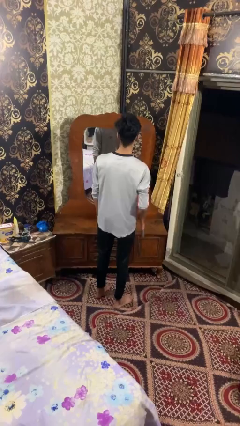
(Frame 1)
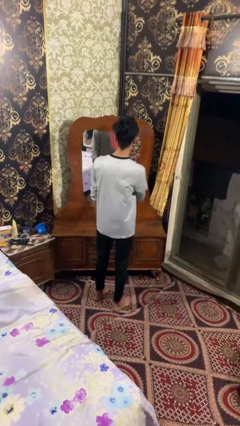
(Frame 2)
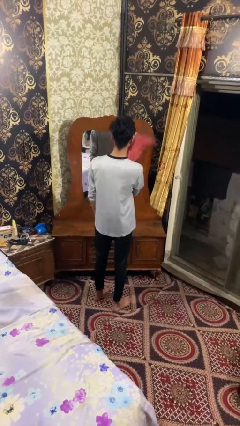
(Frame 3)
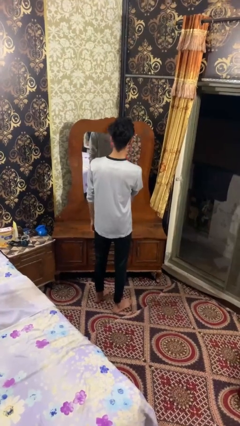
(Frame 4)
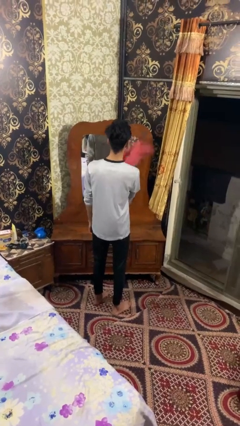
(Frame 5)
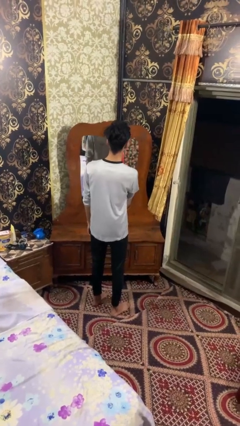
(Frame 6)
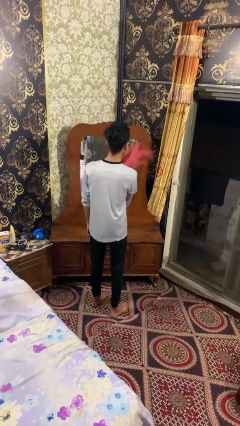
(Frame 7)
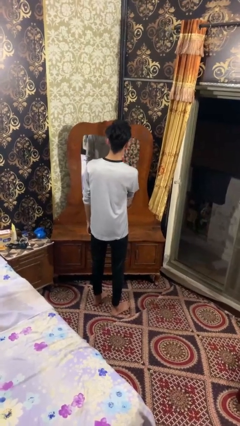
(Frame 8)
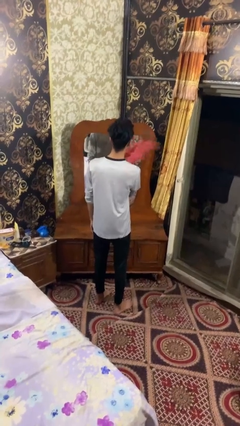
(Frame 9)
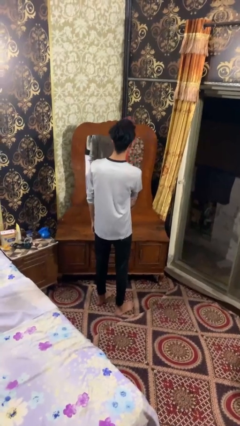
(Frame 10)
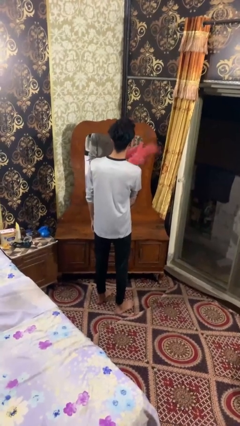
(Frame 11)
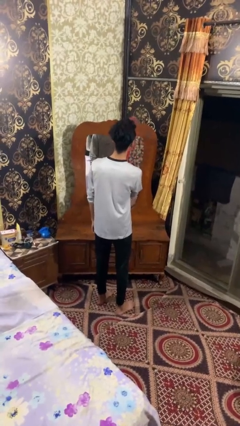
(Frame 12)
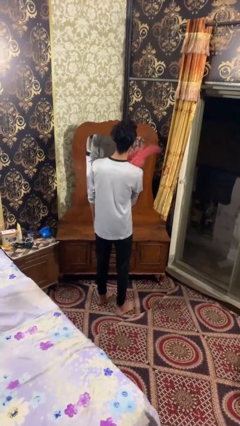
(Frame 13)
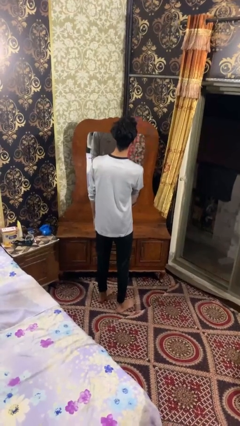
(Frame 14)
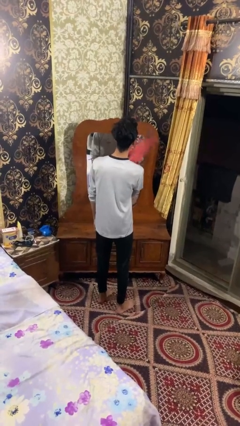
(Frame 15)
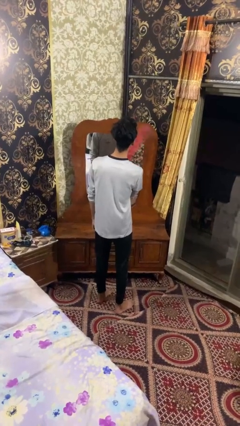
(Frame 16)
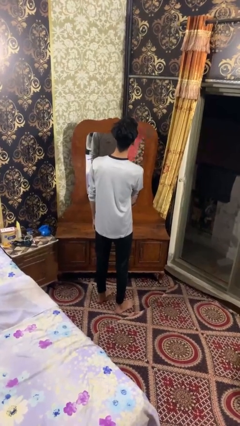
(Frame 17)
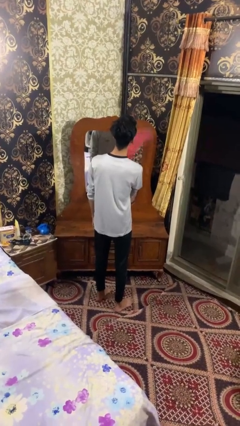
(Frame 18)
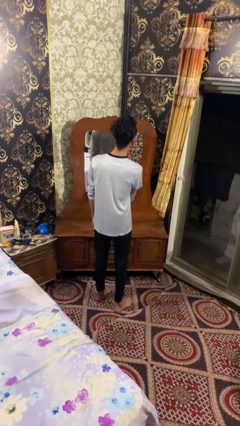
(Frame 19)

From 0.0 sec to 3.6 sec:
person dusts furniture

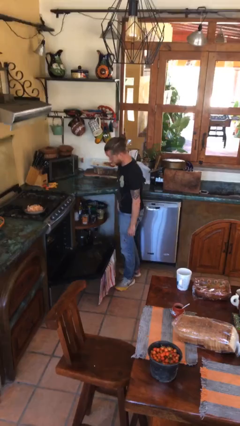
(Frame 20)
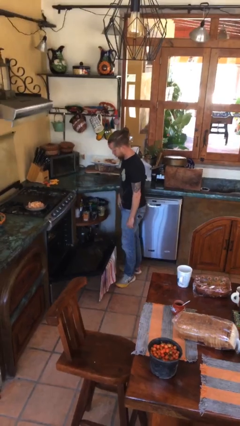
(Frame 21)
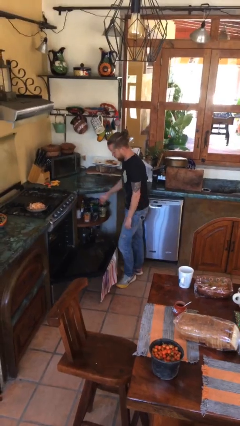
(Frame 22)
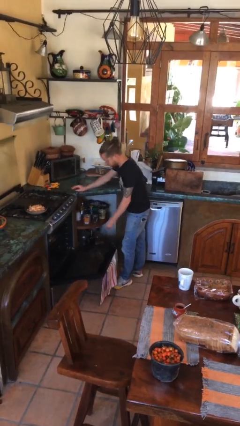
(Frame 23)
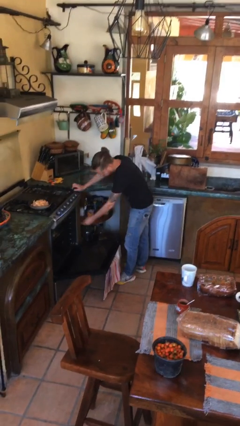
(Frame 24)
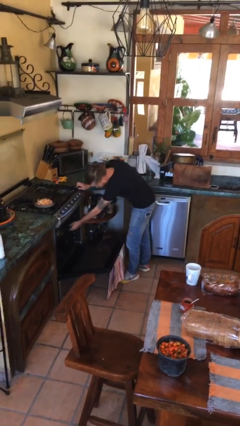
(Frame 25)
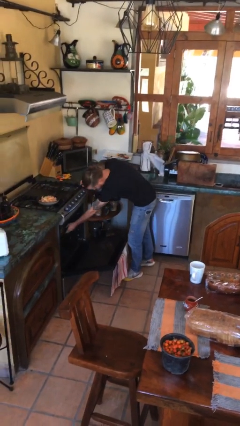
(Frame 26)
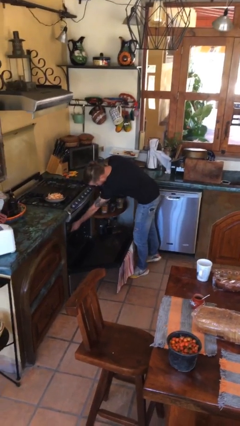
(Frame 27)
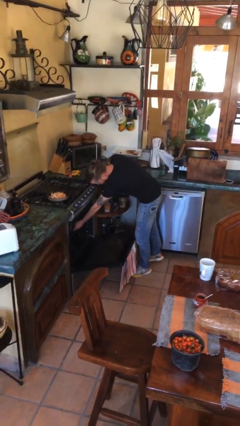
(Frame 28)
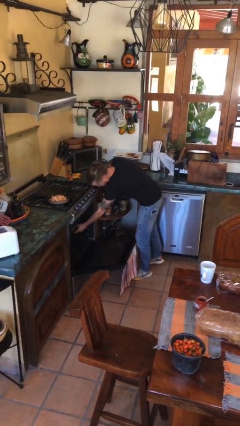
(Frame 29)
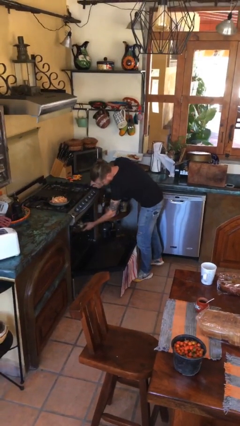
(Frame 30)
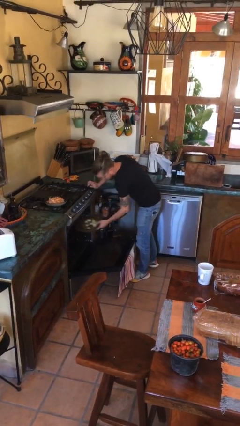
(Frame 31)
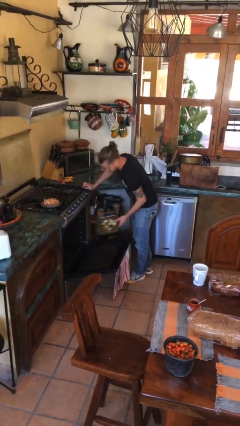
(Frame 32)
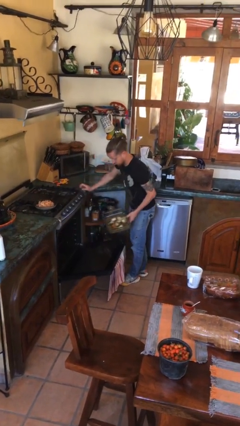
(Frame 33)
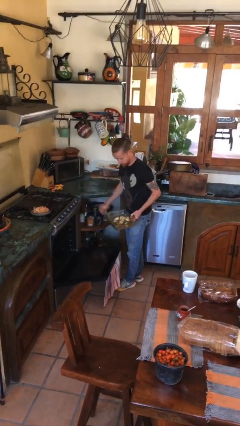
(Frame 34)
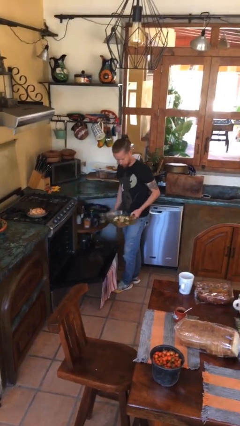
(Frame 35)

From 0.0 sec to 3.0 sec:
person takes object from oven

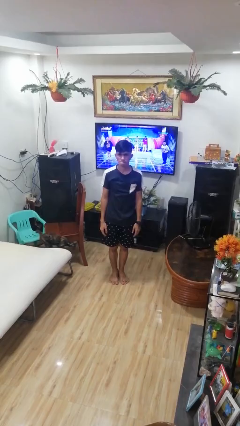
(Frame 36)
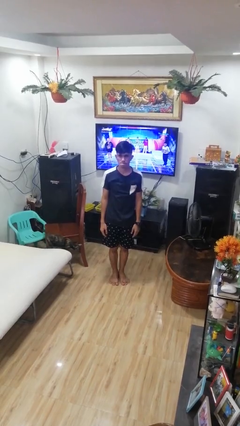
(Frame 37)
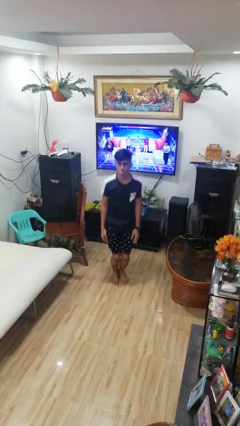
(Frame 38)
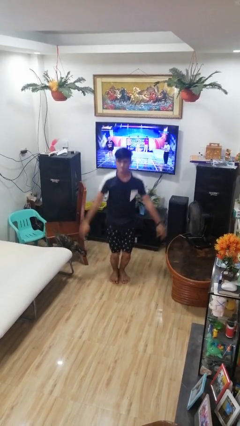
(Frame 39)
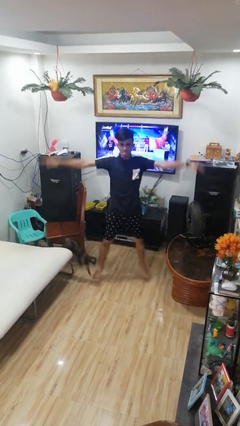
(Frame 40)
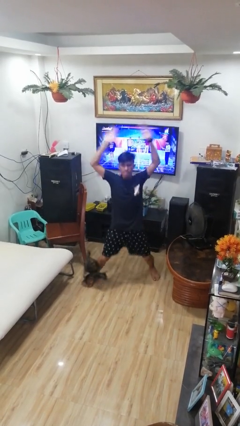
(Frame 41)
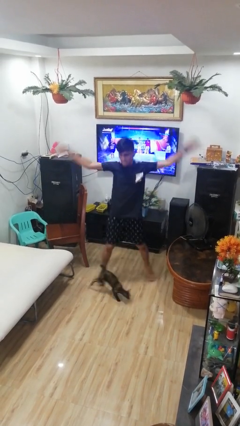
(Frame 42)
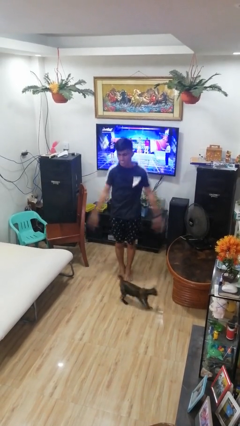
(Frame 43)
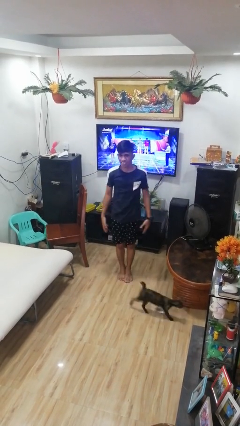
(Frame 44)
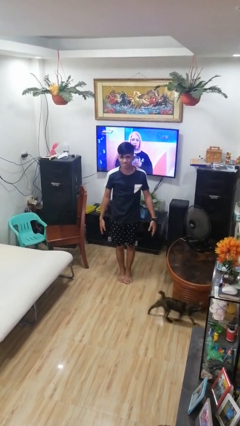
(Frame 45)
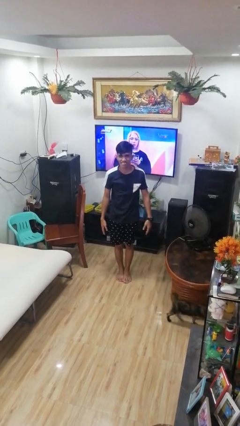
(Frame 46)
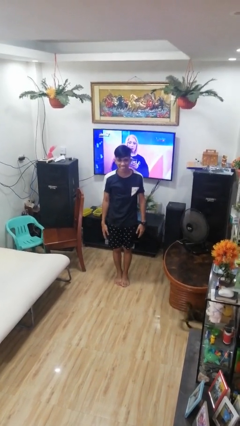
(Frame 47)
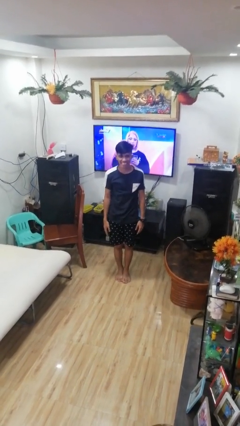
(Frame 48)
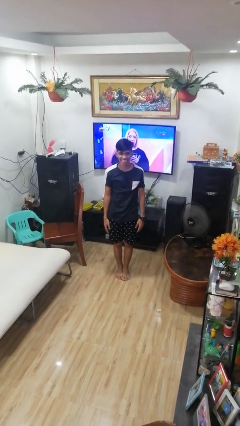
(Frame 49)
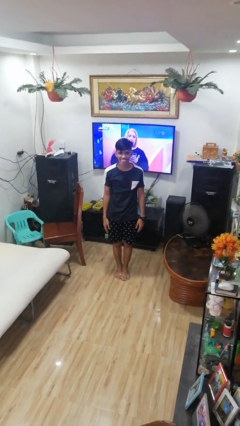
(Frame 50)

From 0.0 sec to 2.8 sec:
person exercises with jumping jacks

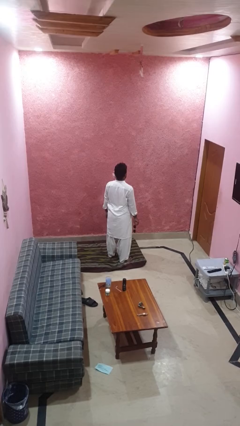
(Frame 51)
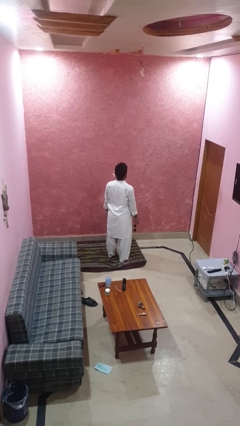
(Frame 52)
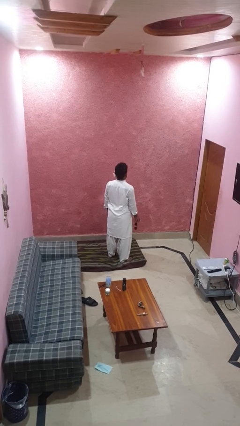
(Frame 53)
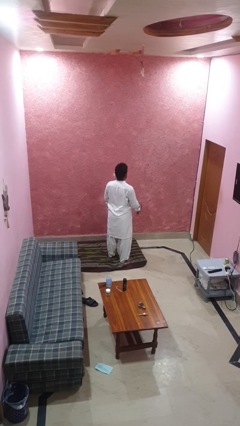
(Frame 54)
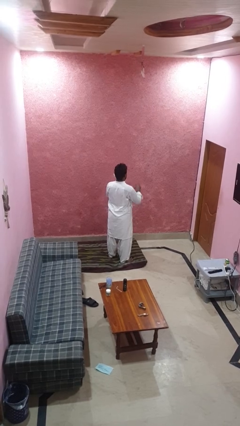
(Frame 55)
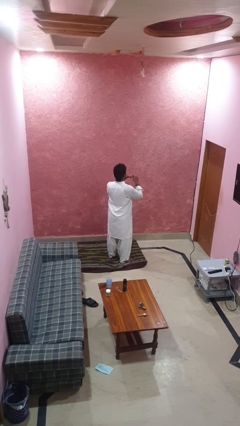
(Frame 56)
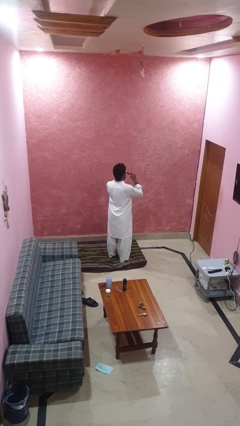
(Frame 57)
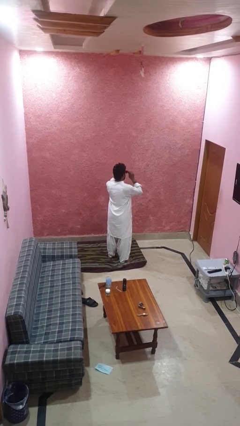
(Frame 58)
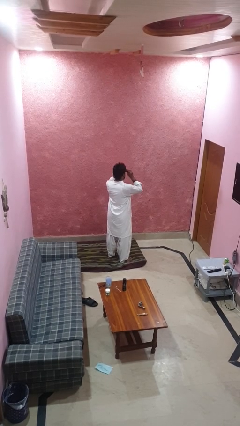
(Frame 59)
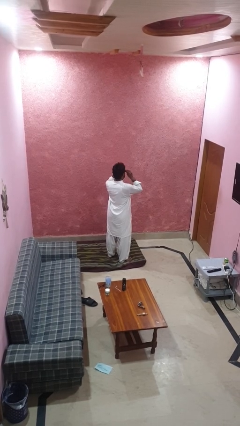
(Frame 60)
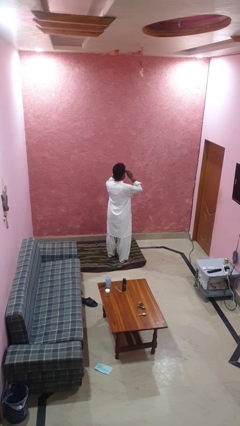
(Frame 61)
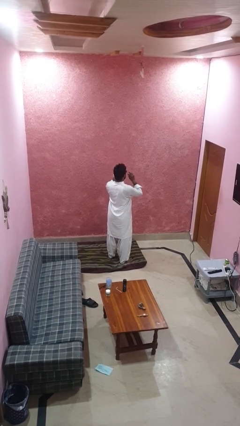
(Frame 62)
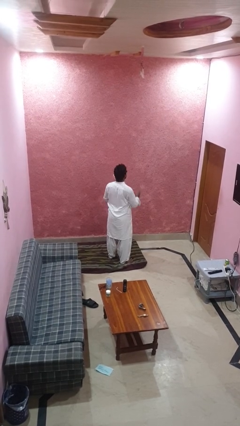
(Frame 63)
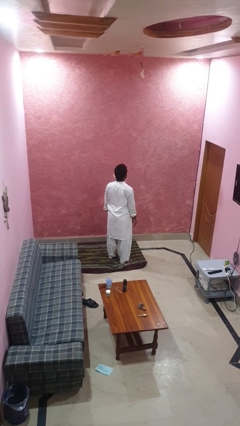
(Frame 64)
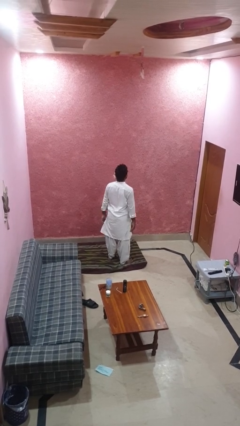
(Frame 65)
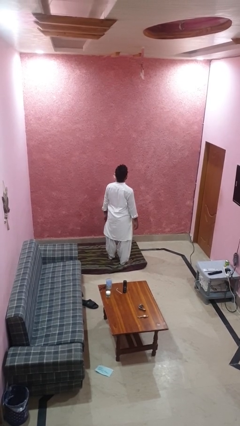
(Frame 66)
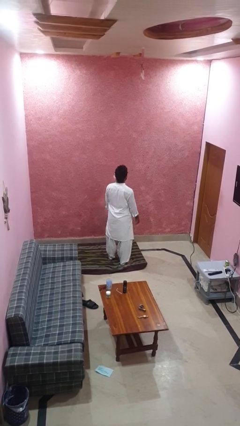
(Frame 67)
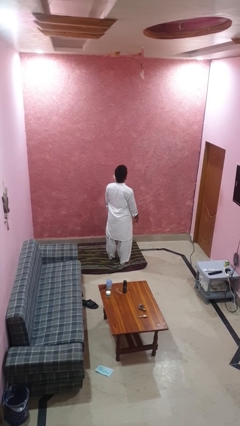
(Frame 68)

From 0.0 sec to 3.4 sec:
person puts on sunglasses

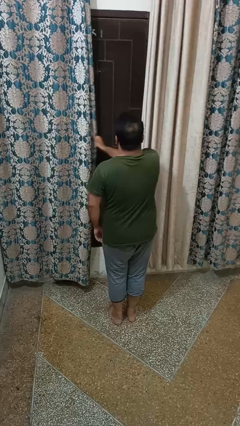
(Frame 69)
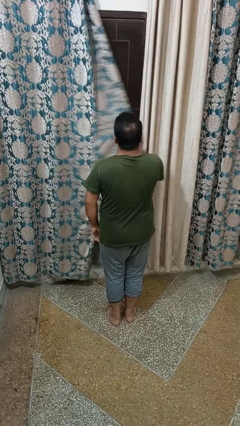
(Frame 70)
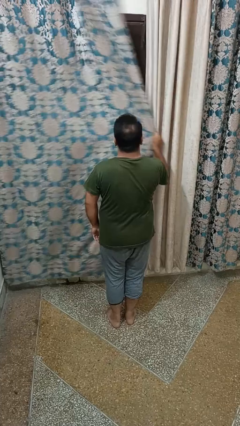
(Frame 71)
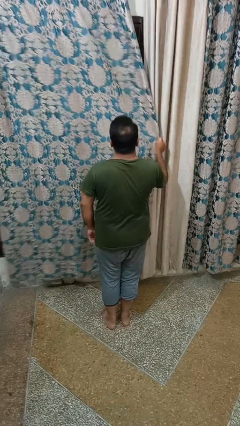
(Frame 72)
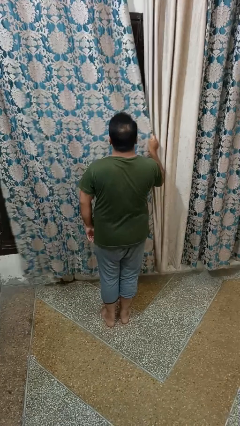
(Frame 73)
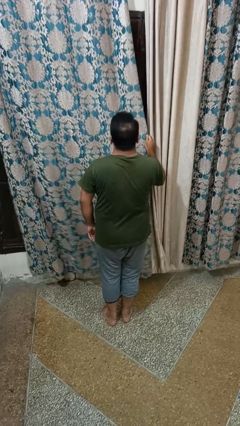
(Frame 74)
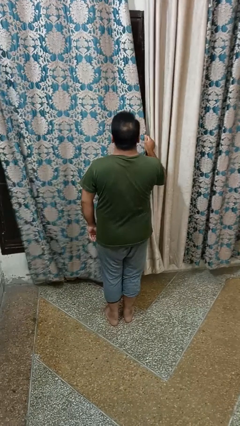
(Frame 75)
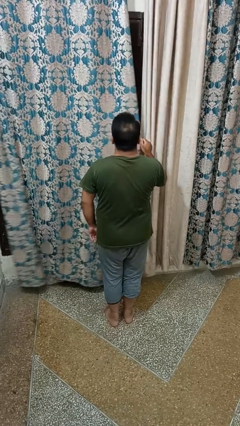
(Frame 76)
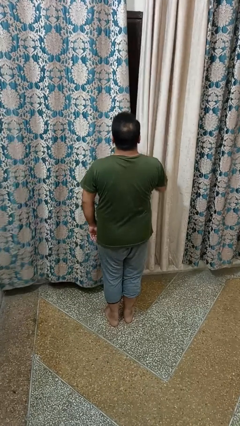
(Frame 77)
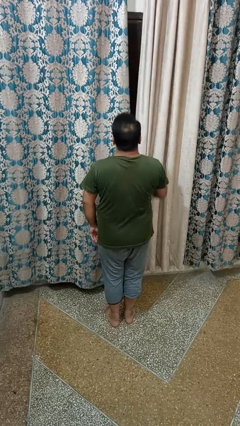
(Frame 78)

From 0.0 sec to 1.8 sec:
person closes curtains

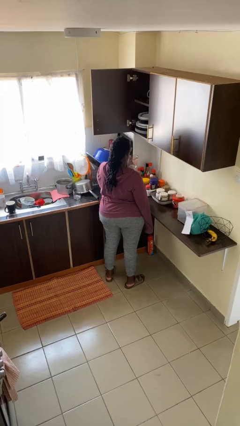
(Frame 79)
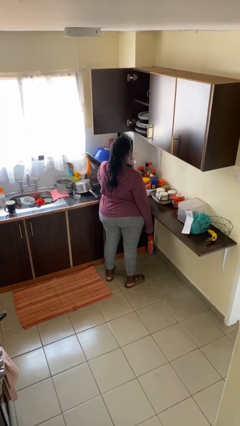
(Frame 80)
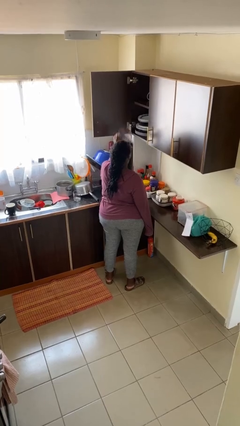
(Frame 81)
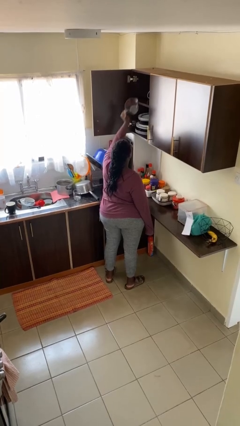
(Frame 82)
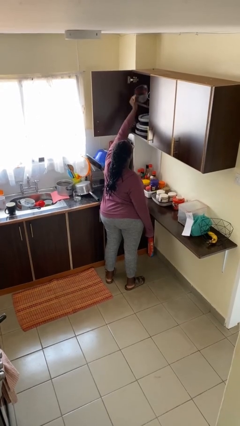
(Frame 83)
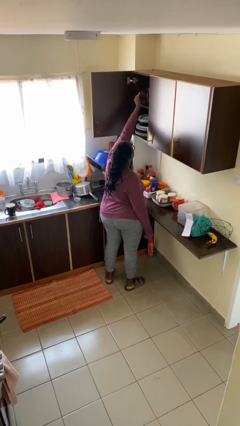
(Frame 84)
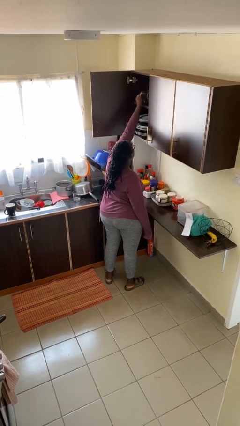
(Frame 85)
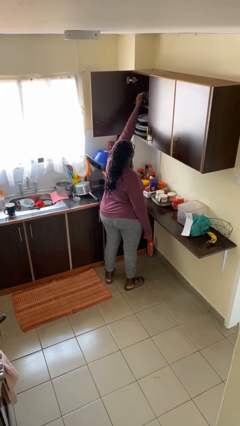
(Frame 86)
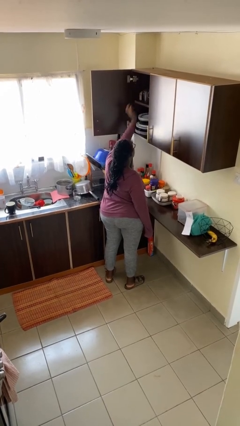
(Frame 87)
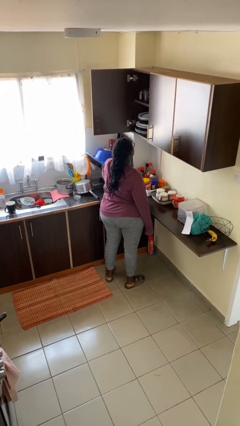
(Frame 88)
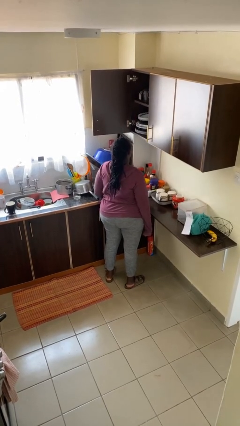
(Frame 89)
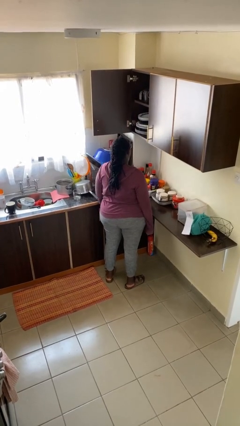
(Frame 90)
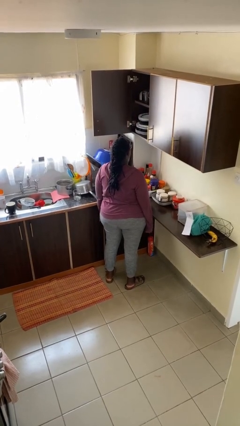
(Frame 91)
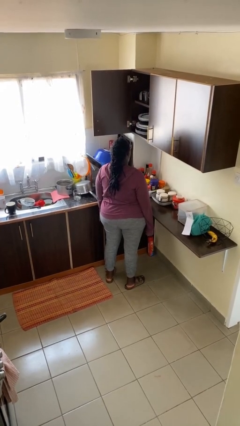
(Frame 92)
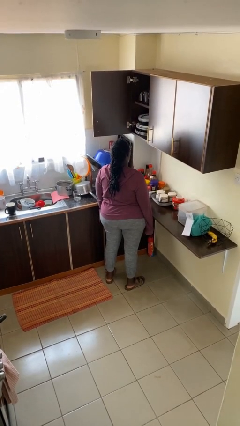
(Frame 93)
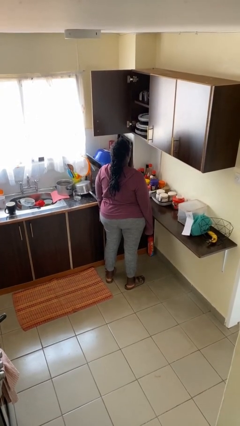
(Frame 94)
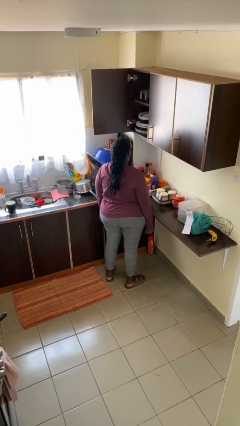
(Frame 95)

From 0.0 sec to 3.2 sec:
person puts down object into cabinet
